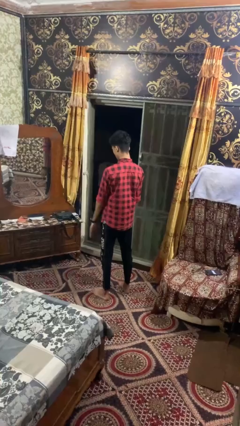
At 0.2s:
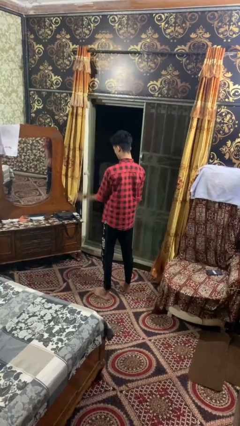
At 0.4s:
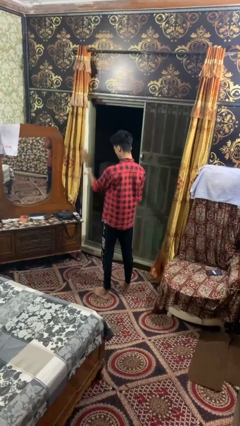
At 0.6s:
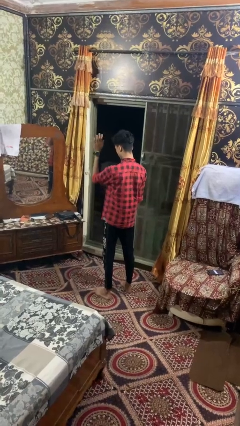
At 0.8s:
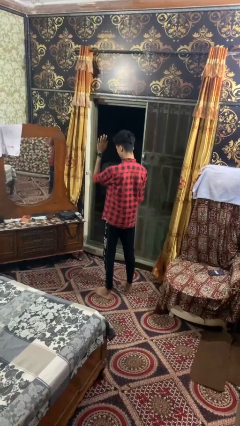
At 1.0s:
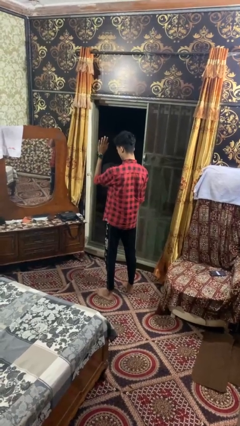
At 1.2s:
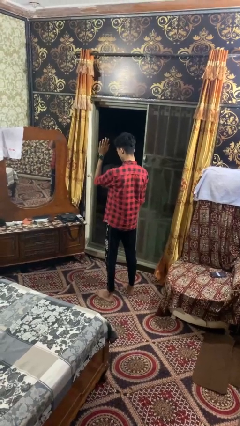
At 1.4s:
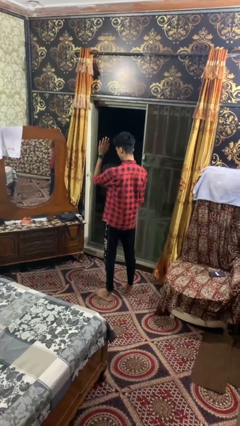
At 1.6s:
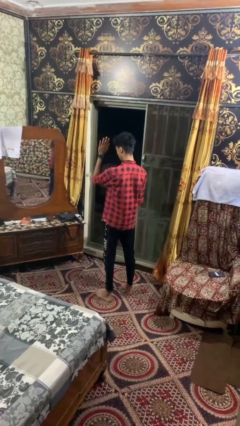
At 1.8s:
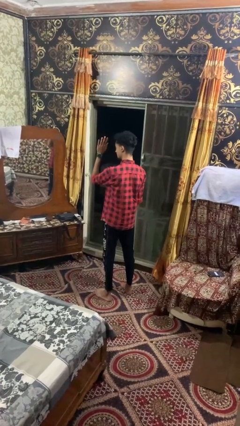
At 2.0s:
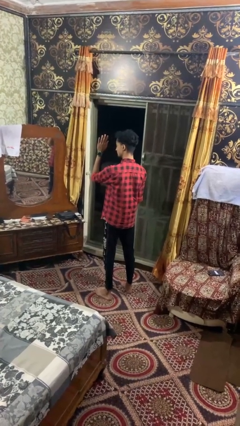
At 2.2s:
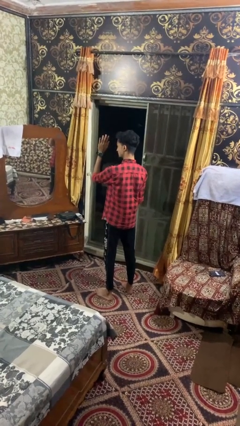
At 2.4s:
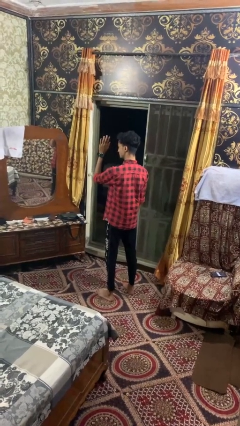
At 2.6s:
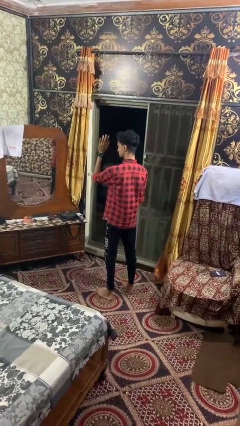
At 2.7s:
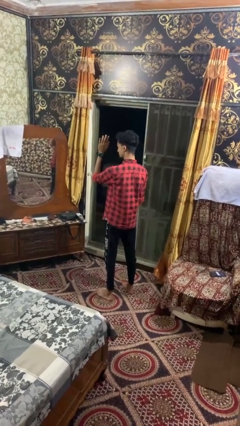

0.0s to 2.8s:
person gestures raise hand

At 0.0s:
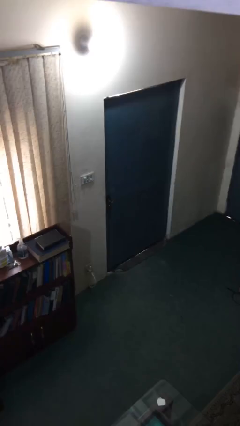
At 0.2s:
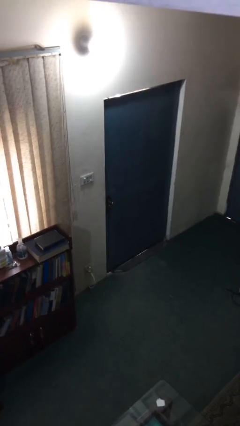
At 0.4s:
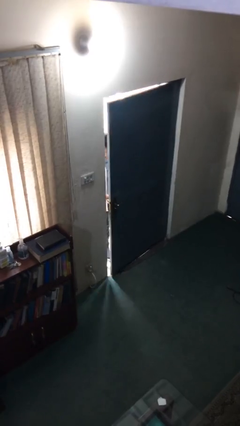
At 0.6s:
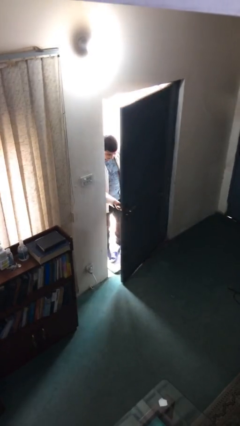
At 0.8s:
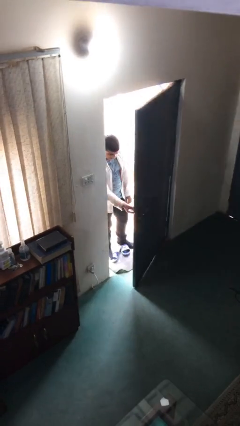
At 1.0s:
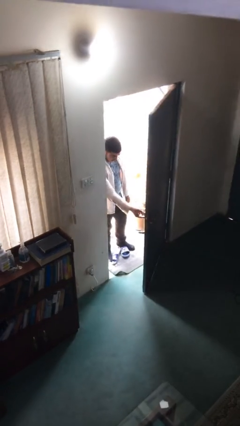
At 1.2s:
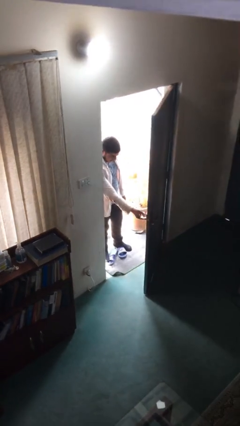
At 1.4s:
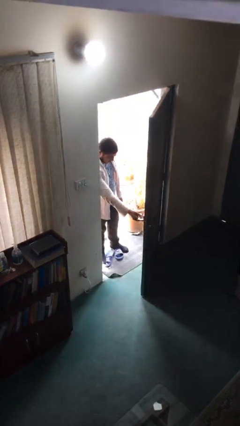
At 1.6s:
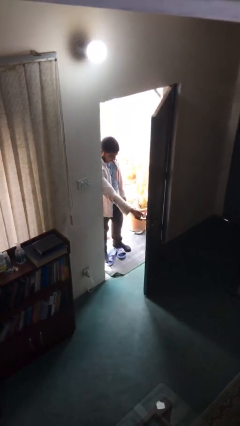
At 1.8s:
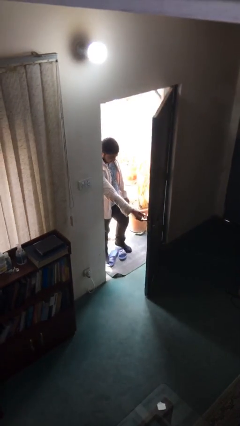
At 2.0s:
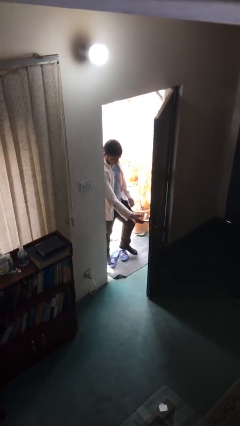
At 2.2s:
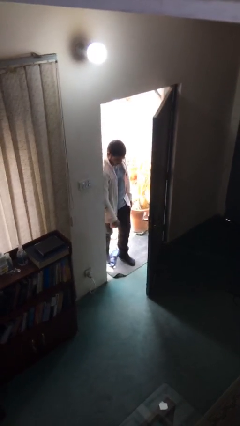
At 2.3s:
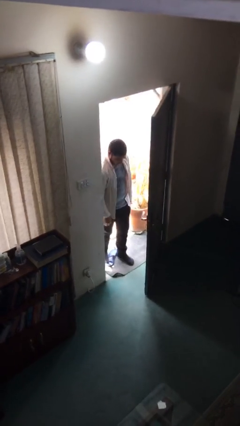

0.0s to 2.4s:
person opens facility door

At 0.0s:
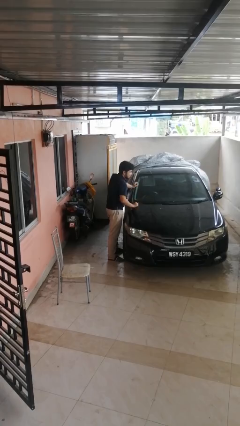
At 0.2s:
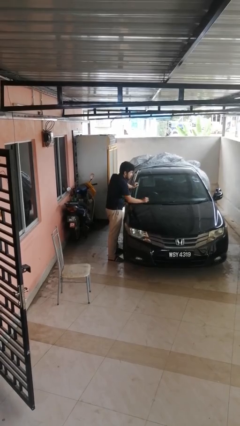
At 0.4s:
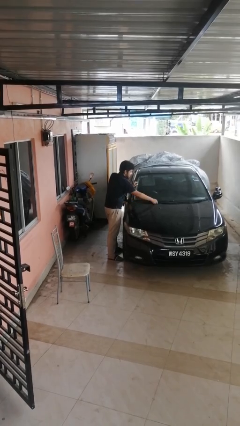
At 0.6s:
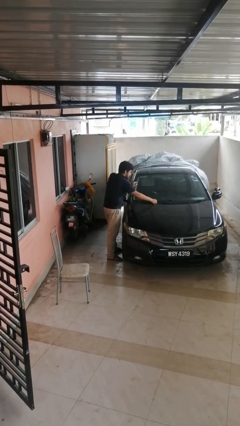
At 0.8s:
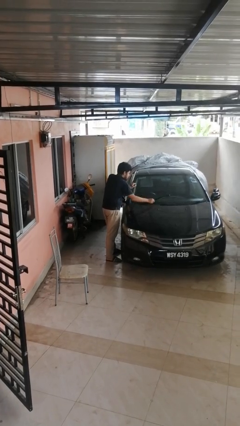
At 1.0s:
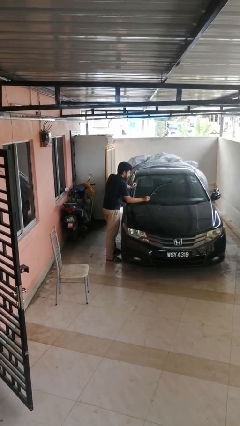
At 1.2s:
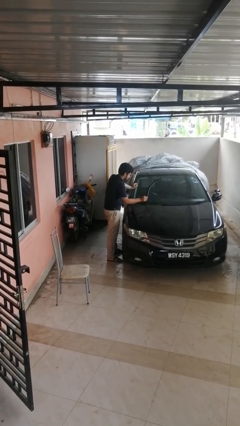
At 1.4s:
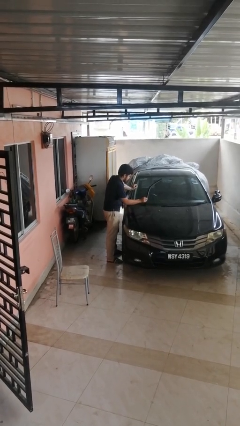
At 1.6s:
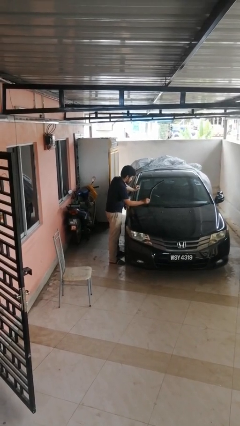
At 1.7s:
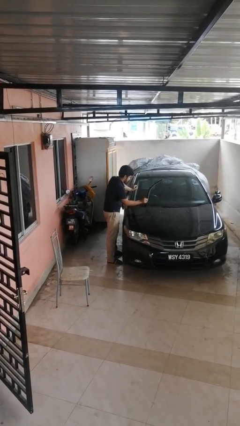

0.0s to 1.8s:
person flips up car wipers

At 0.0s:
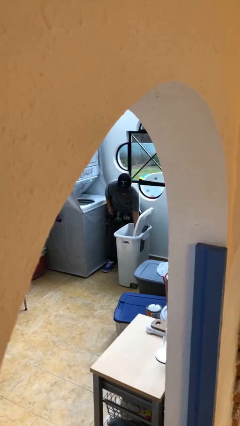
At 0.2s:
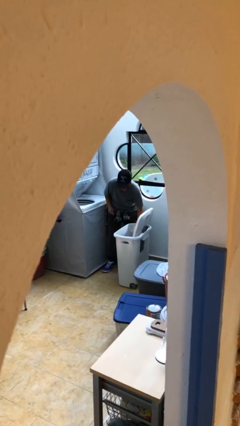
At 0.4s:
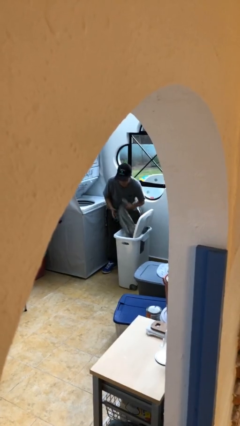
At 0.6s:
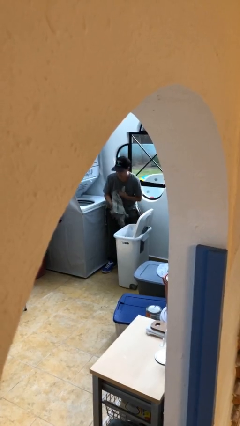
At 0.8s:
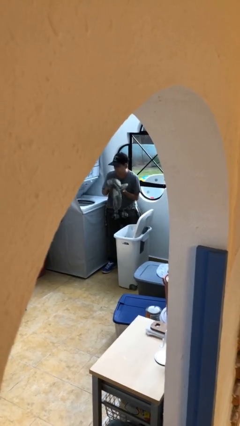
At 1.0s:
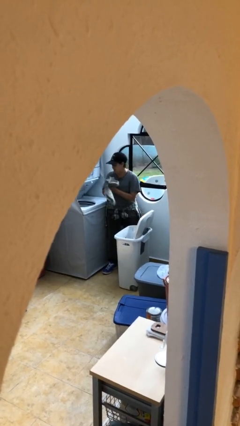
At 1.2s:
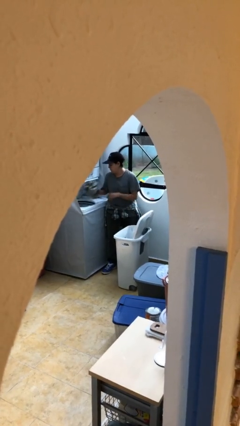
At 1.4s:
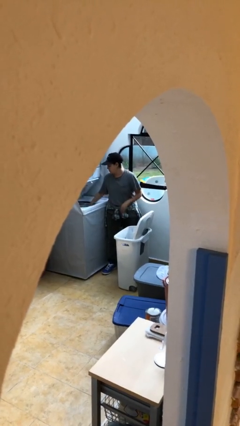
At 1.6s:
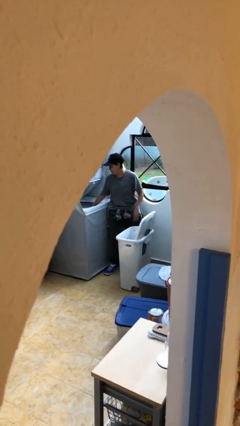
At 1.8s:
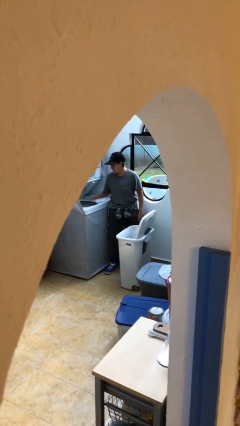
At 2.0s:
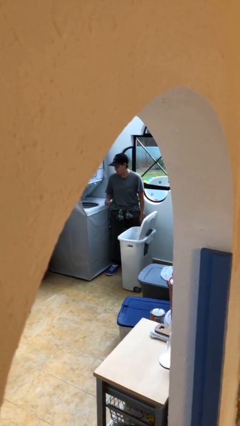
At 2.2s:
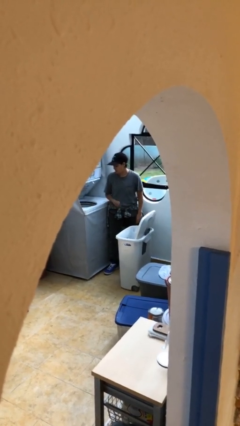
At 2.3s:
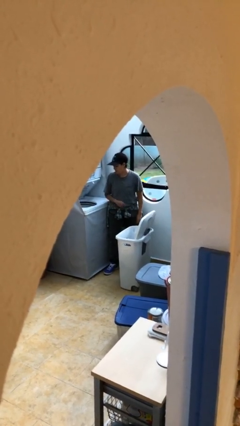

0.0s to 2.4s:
person loads clotheswasher

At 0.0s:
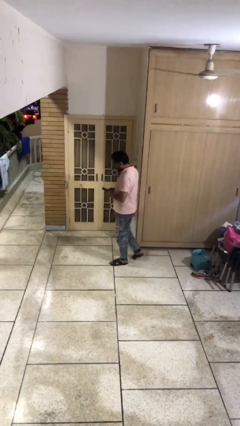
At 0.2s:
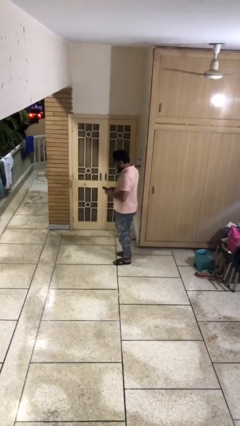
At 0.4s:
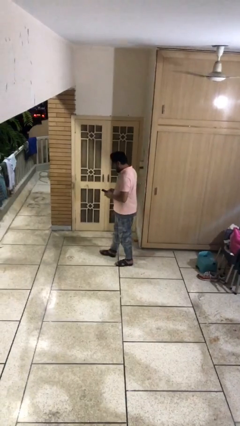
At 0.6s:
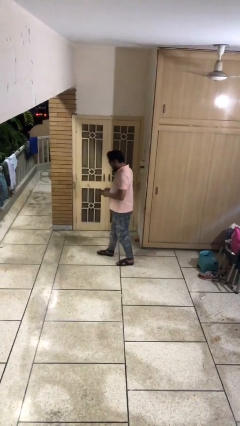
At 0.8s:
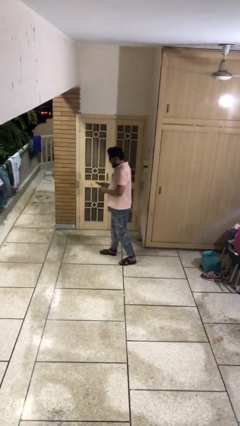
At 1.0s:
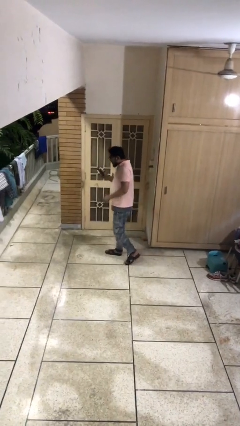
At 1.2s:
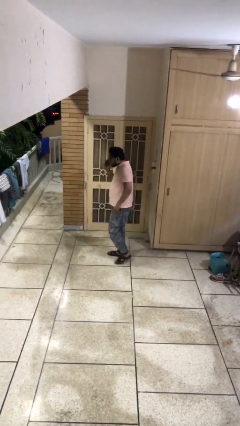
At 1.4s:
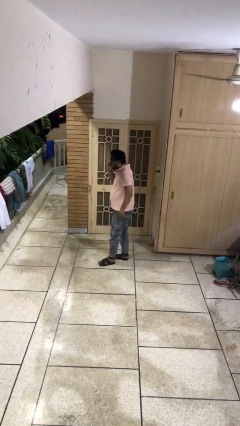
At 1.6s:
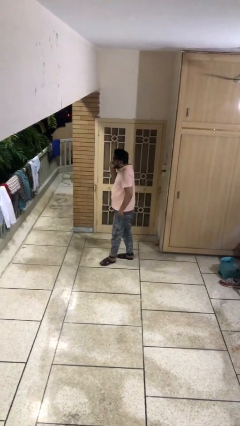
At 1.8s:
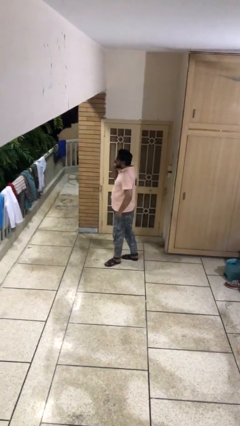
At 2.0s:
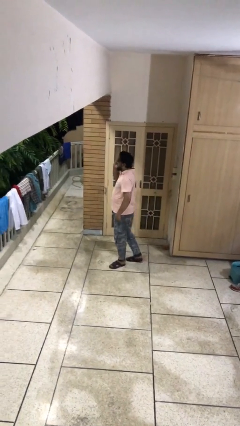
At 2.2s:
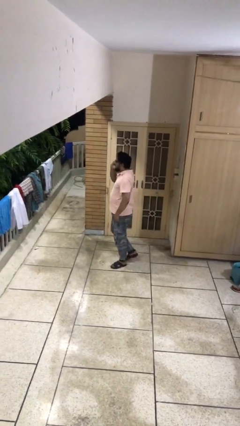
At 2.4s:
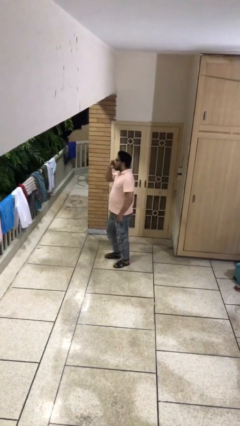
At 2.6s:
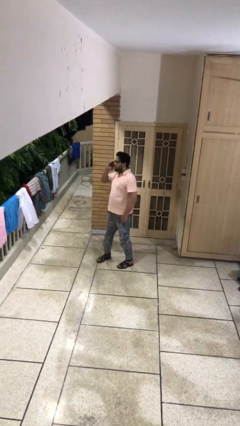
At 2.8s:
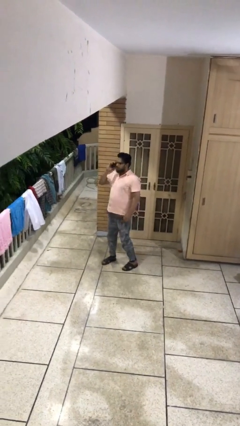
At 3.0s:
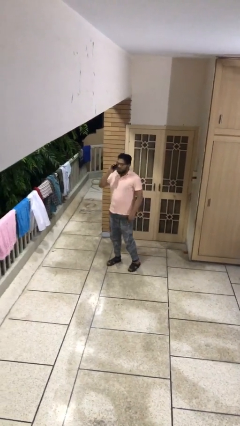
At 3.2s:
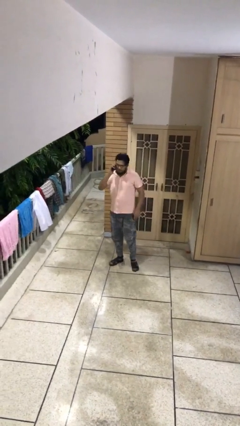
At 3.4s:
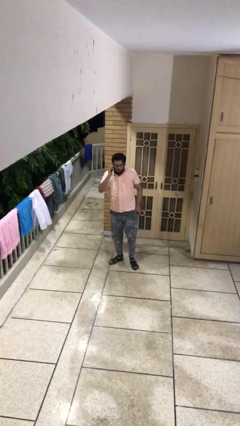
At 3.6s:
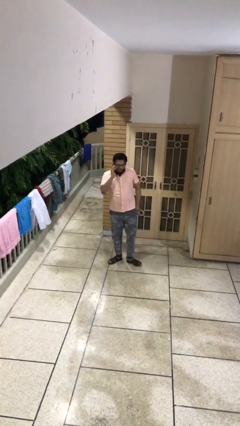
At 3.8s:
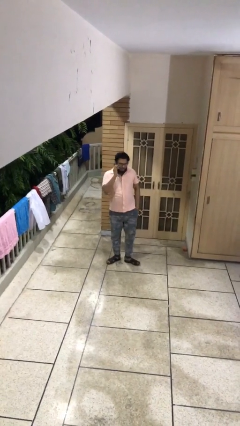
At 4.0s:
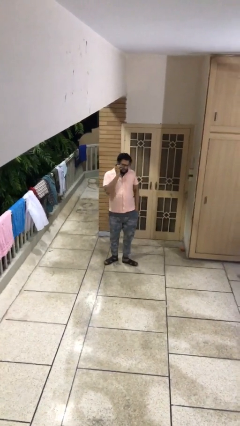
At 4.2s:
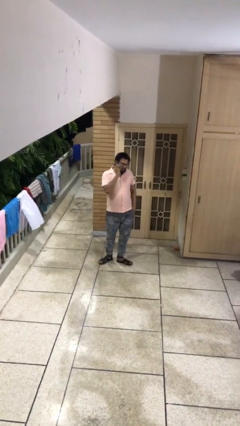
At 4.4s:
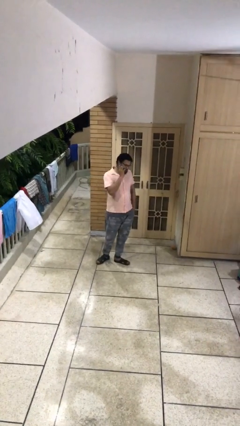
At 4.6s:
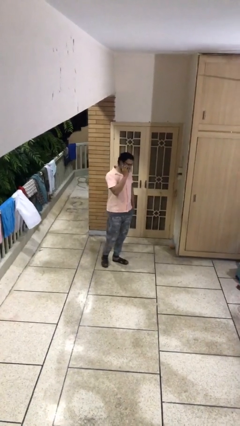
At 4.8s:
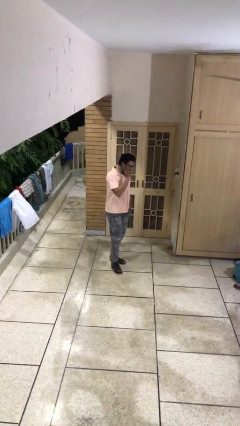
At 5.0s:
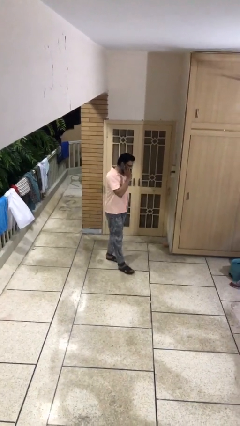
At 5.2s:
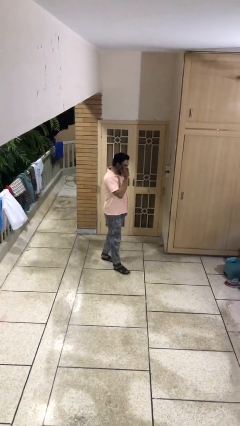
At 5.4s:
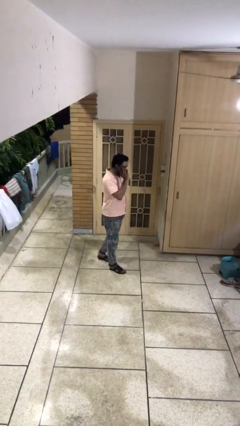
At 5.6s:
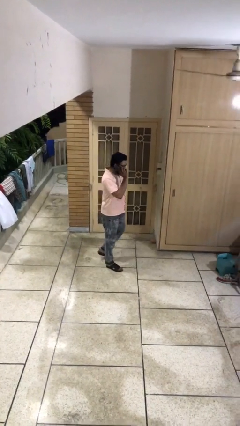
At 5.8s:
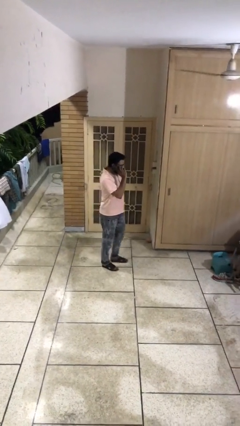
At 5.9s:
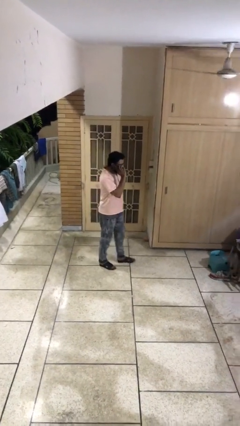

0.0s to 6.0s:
person talks on phone

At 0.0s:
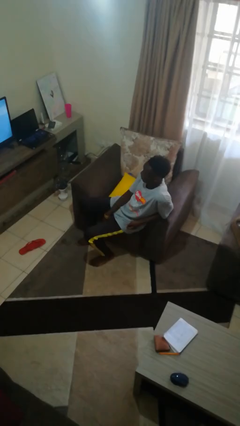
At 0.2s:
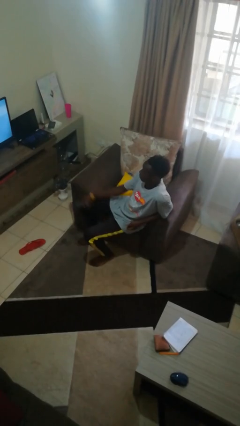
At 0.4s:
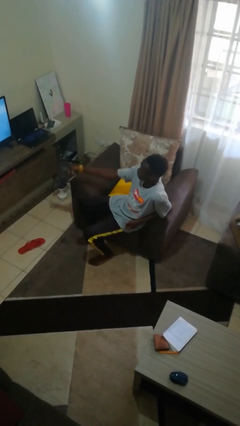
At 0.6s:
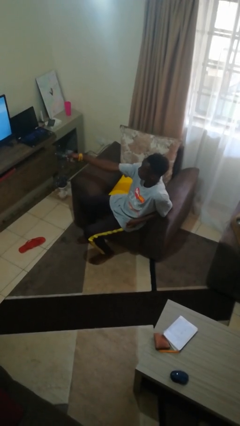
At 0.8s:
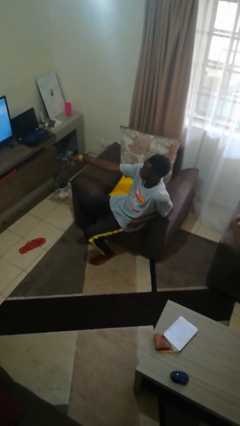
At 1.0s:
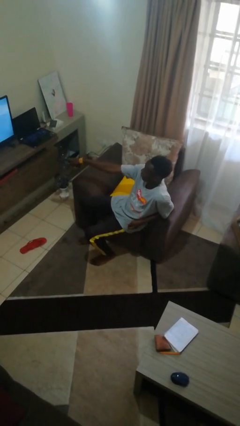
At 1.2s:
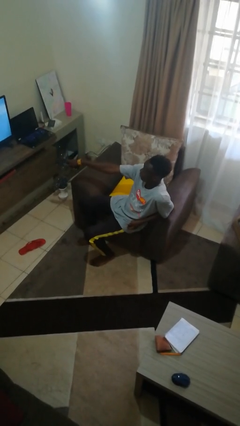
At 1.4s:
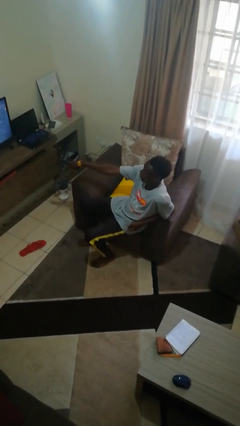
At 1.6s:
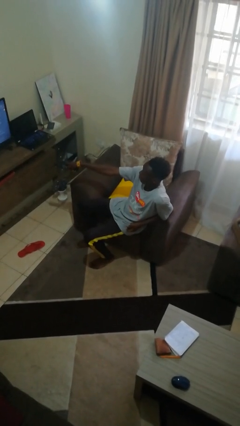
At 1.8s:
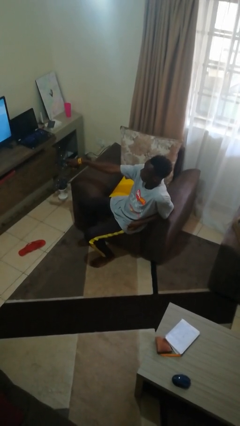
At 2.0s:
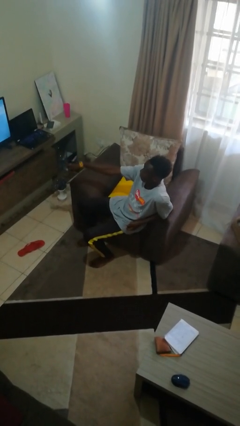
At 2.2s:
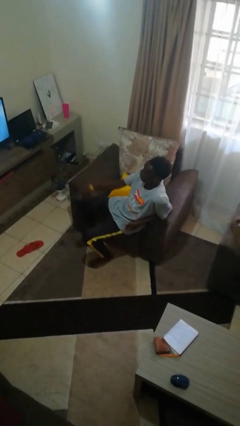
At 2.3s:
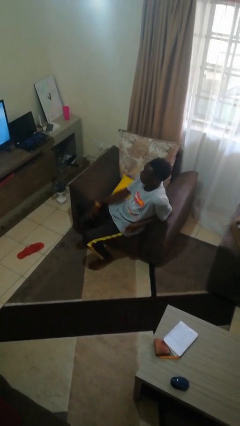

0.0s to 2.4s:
person uses television remote
